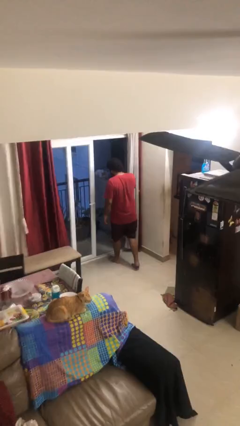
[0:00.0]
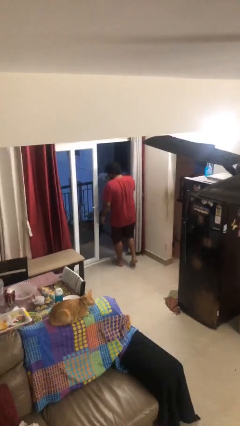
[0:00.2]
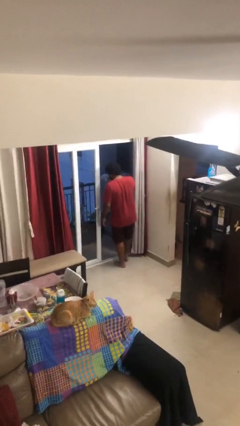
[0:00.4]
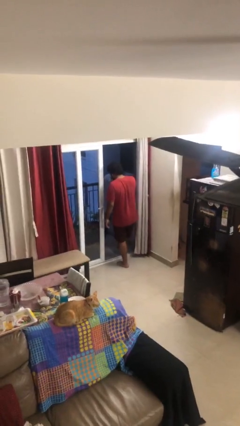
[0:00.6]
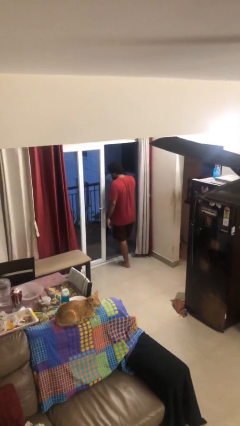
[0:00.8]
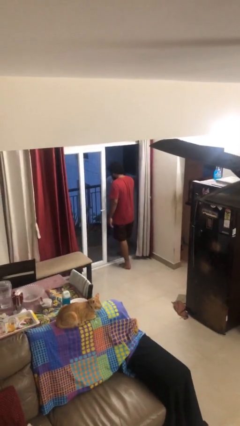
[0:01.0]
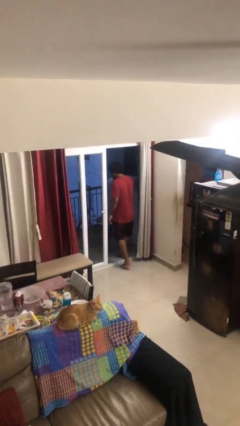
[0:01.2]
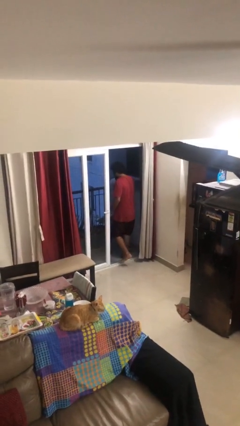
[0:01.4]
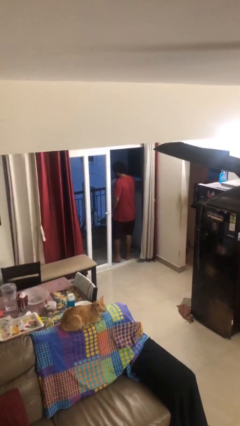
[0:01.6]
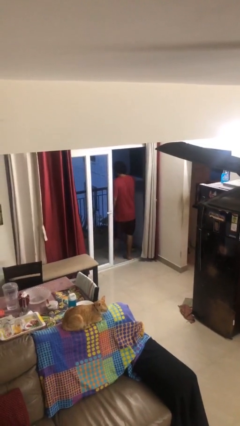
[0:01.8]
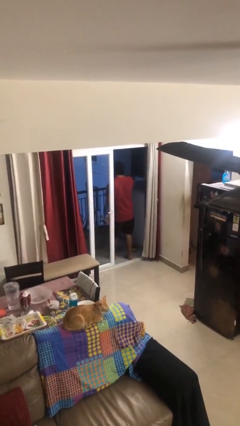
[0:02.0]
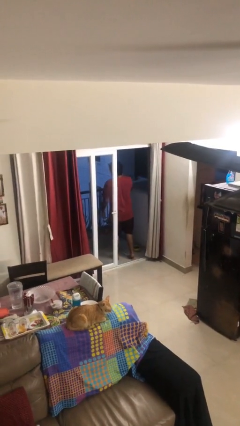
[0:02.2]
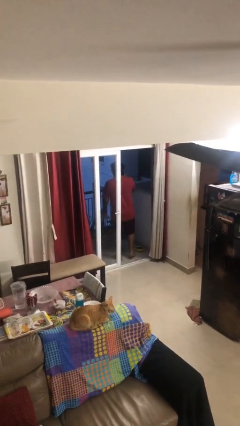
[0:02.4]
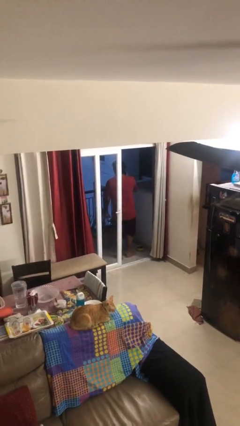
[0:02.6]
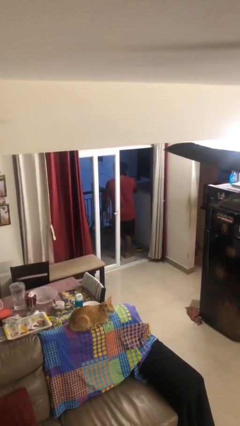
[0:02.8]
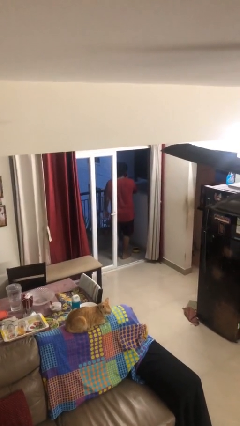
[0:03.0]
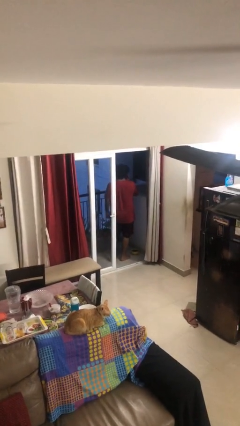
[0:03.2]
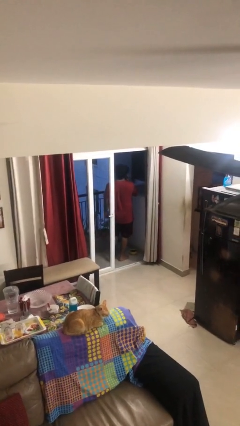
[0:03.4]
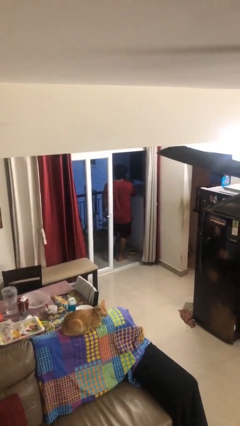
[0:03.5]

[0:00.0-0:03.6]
person exits scene through structure

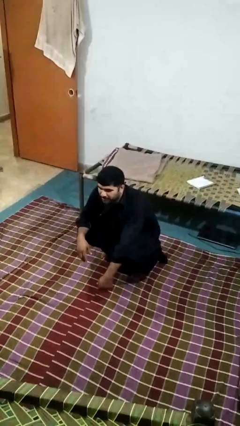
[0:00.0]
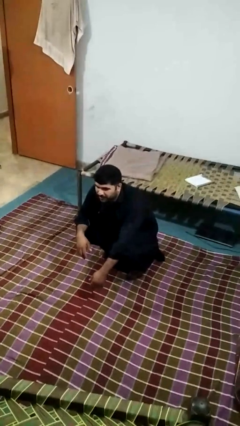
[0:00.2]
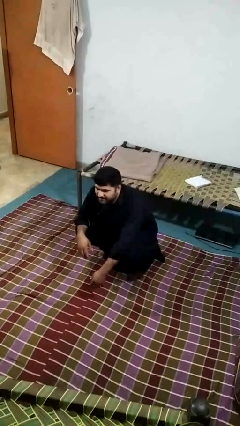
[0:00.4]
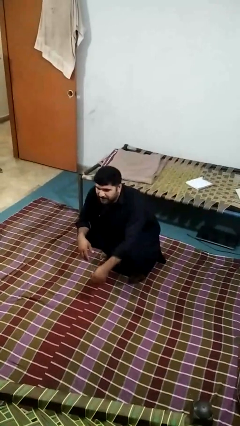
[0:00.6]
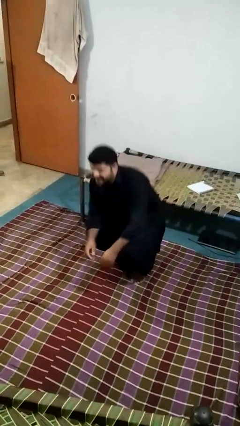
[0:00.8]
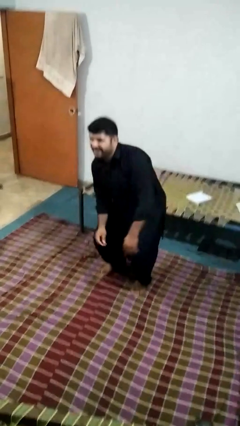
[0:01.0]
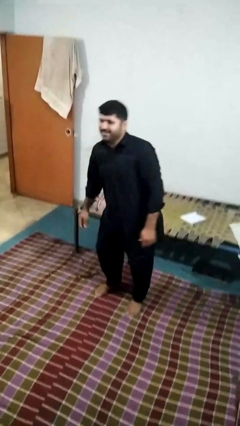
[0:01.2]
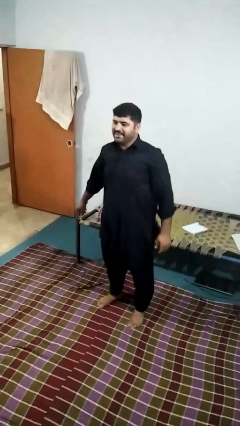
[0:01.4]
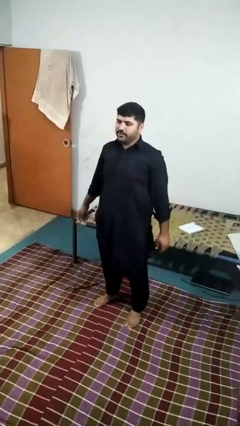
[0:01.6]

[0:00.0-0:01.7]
person stands up

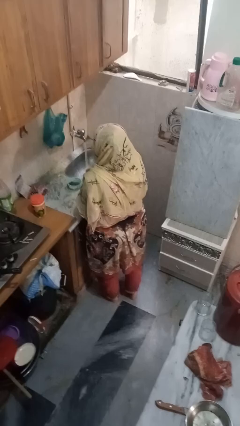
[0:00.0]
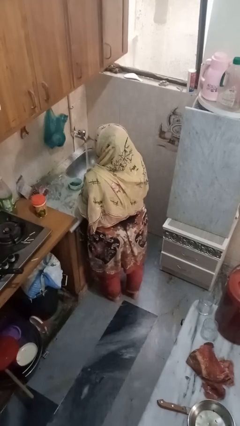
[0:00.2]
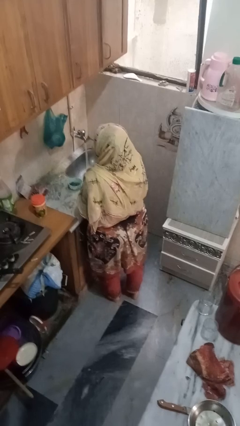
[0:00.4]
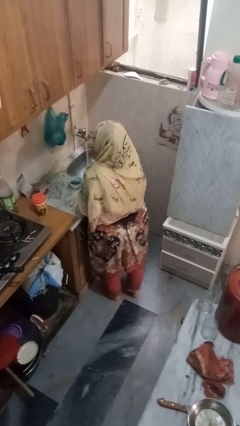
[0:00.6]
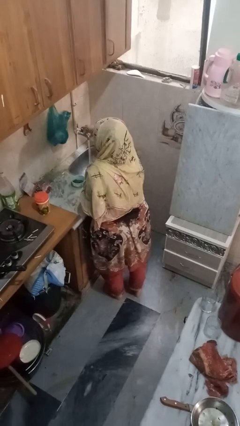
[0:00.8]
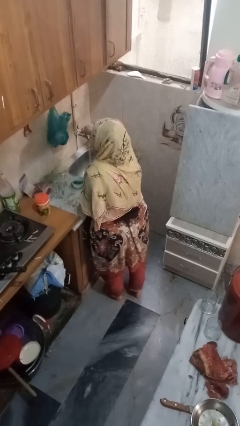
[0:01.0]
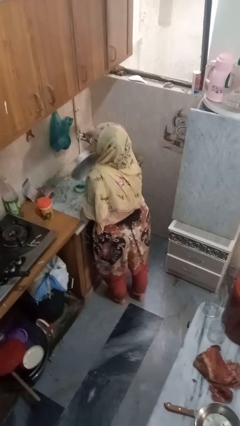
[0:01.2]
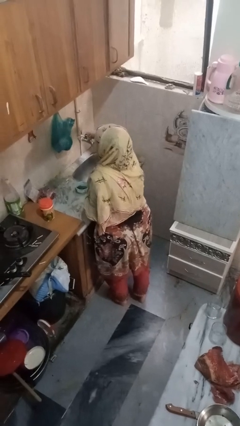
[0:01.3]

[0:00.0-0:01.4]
person turns off faucet

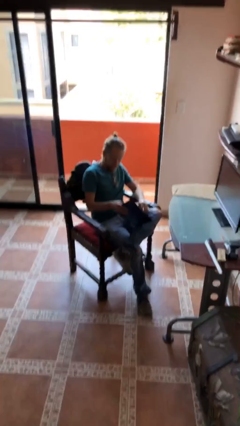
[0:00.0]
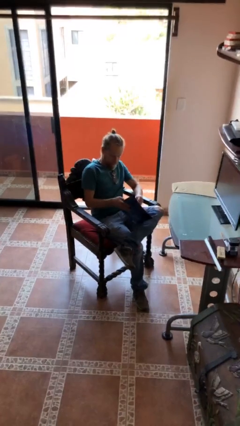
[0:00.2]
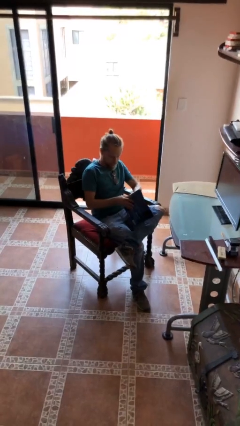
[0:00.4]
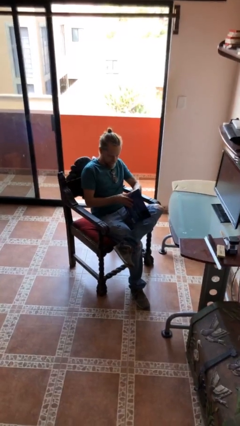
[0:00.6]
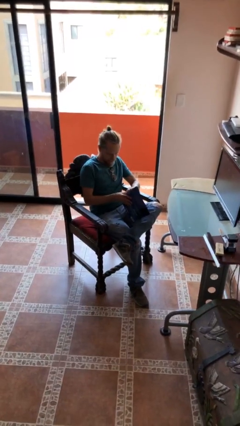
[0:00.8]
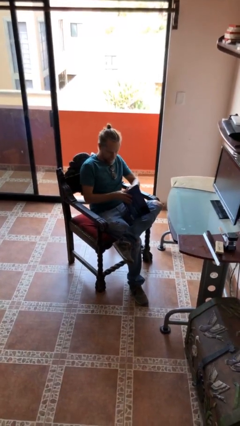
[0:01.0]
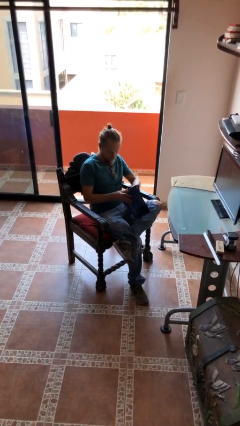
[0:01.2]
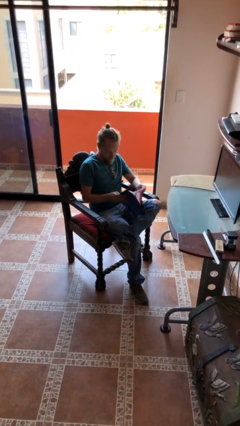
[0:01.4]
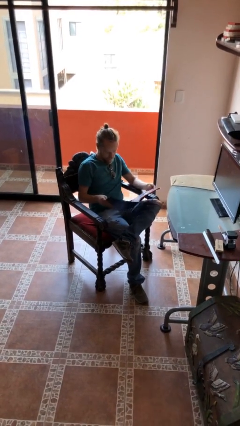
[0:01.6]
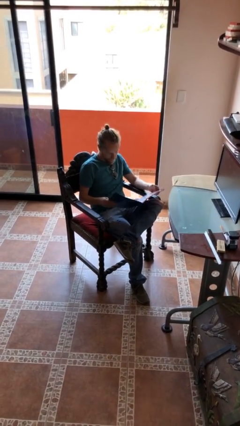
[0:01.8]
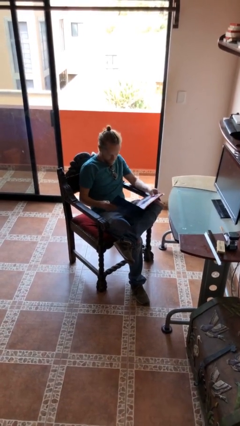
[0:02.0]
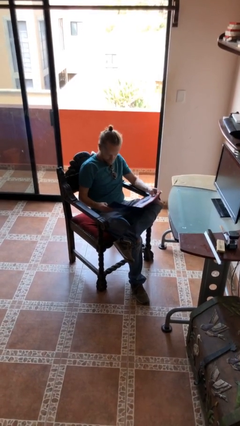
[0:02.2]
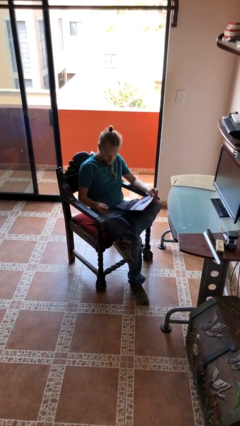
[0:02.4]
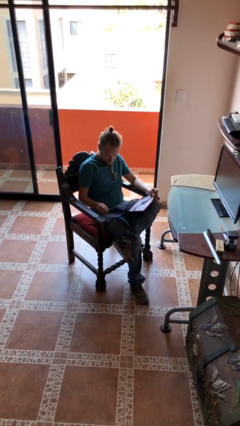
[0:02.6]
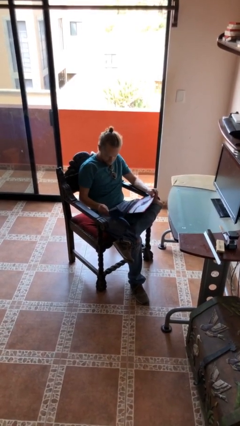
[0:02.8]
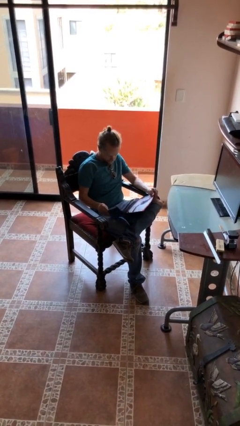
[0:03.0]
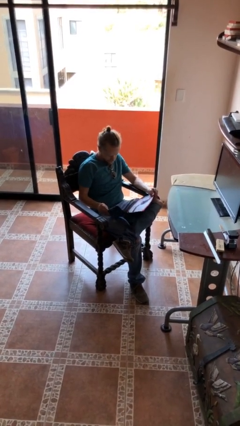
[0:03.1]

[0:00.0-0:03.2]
person reads document

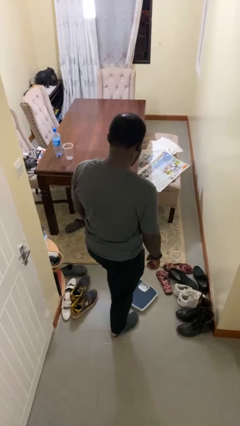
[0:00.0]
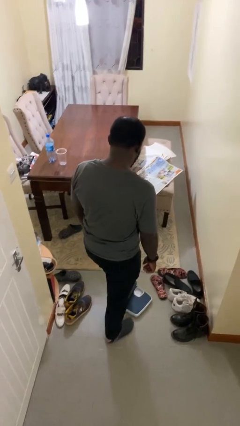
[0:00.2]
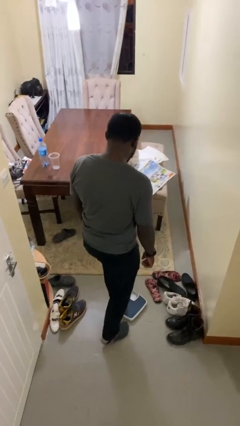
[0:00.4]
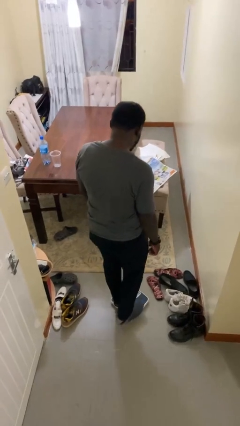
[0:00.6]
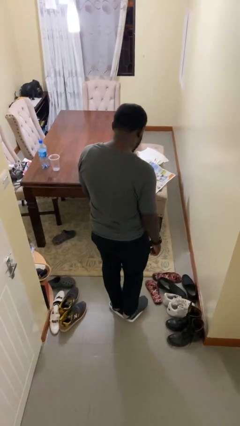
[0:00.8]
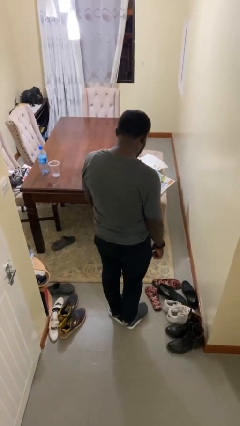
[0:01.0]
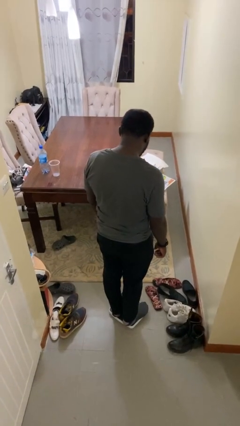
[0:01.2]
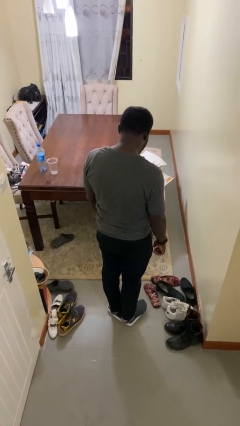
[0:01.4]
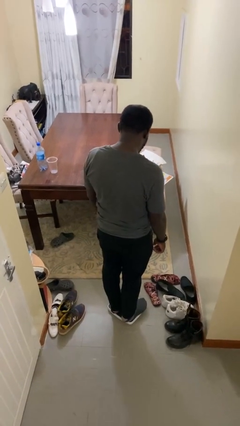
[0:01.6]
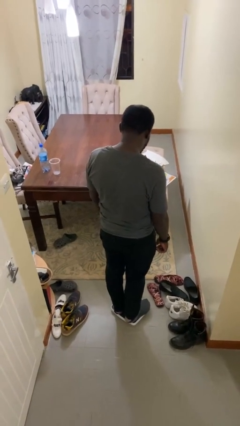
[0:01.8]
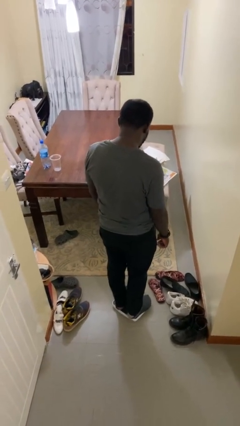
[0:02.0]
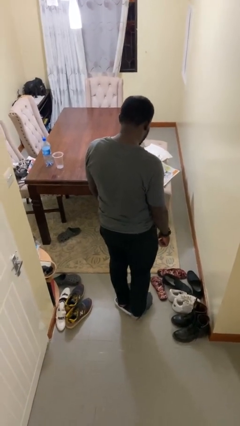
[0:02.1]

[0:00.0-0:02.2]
person uses bodyweight scale

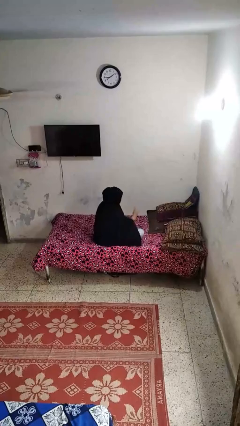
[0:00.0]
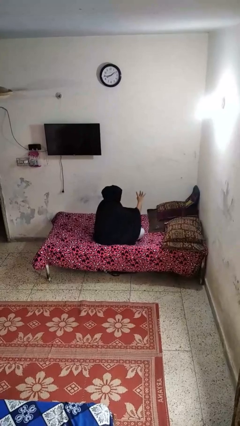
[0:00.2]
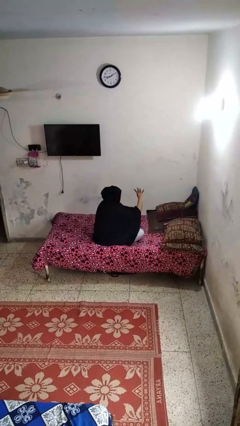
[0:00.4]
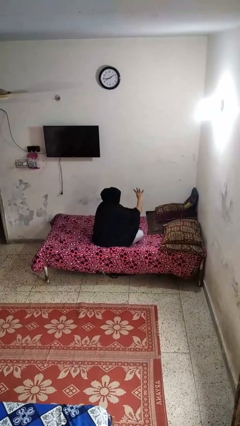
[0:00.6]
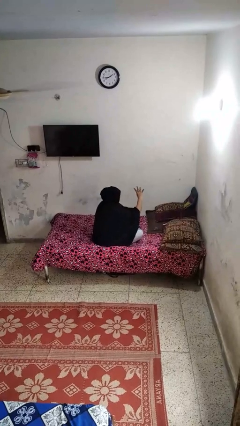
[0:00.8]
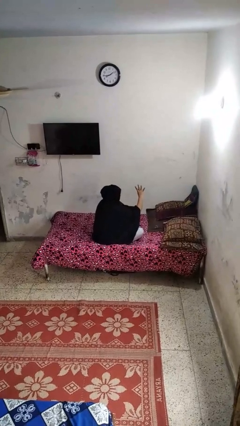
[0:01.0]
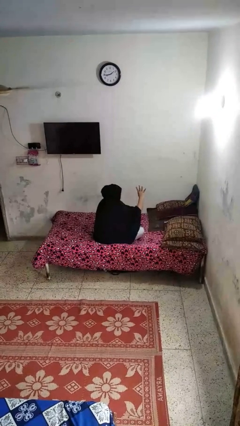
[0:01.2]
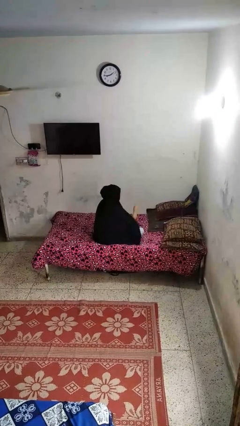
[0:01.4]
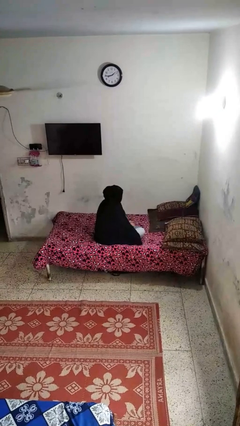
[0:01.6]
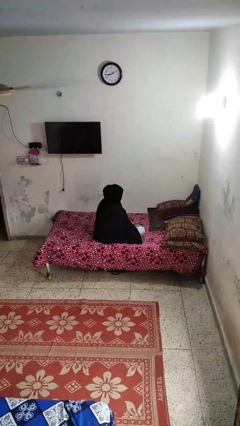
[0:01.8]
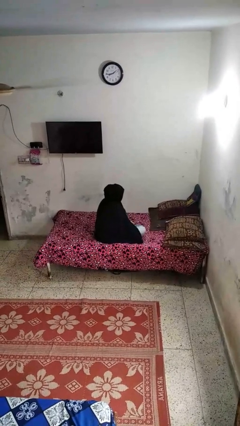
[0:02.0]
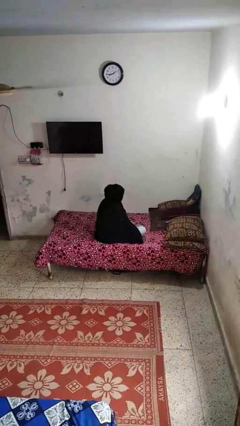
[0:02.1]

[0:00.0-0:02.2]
person gestures number four

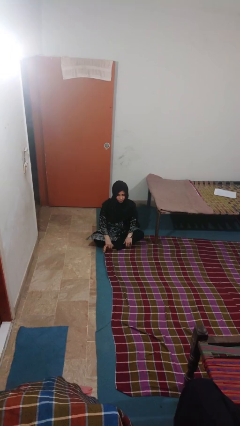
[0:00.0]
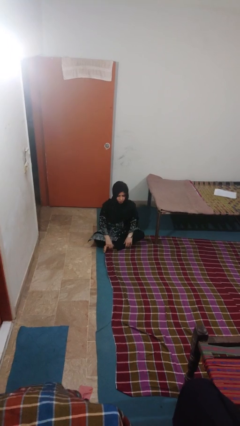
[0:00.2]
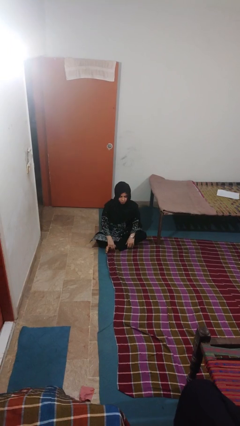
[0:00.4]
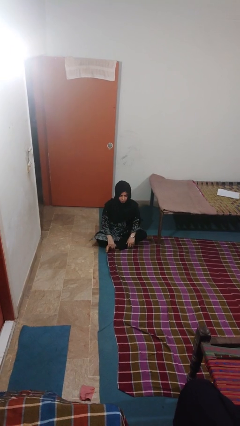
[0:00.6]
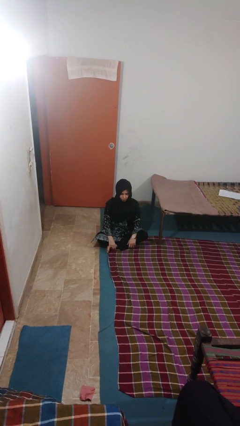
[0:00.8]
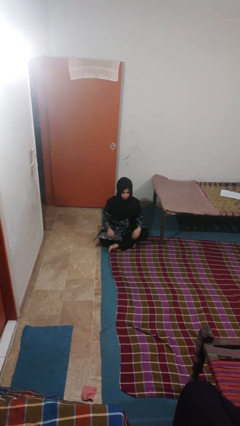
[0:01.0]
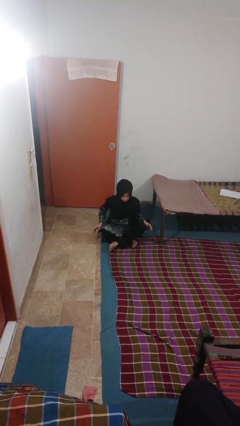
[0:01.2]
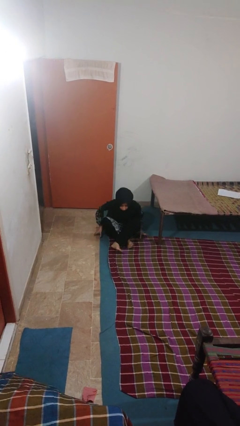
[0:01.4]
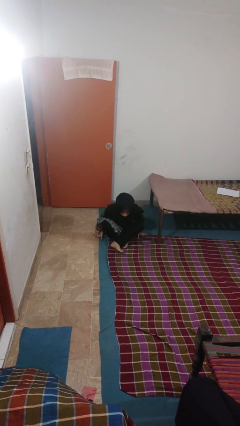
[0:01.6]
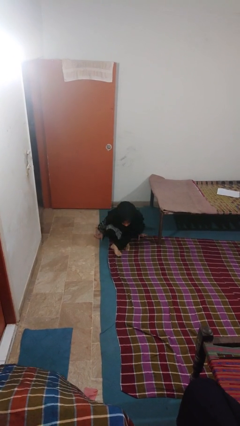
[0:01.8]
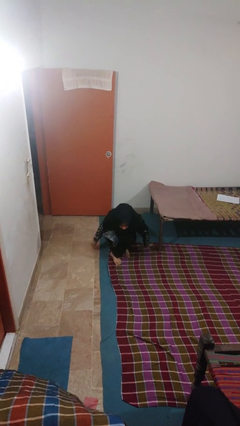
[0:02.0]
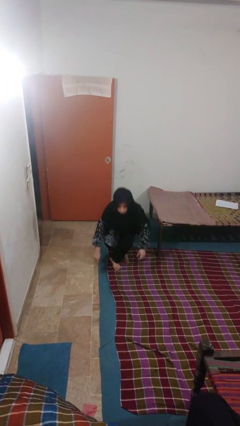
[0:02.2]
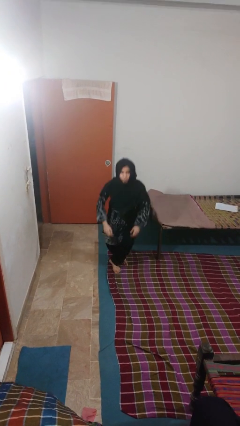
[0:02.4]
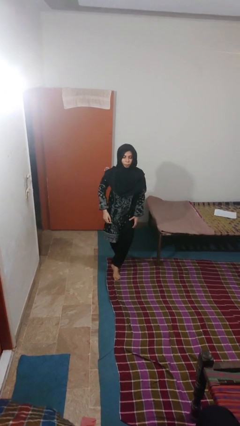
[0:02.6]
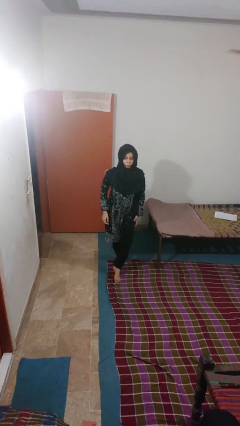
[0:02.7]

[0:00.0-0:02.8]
person stands up from floor
